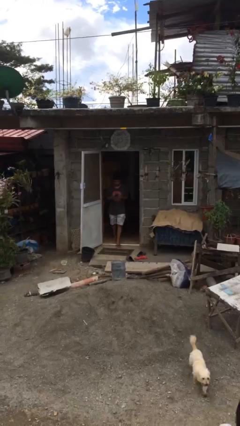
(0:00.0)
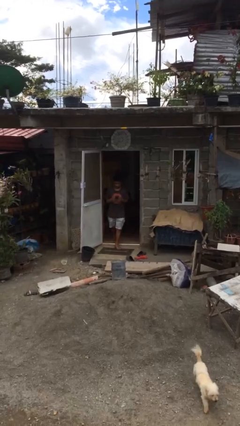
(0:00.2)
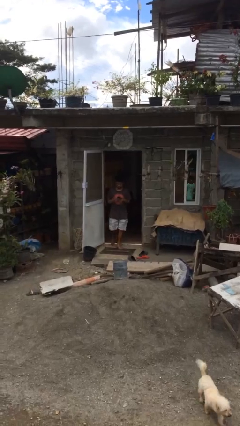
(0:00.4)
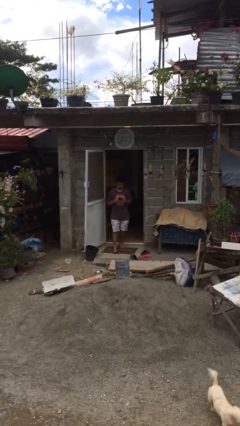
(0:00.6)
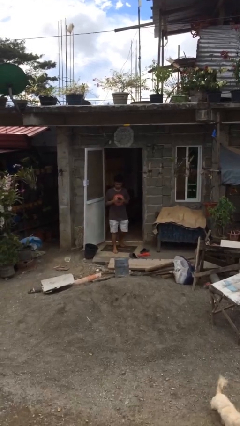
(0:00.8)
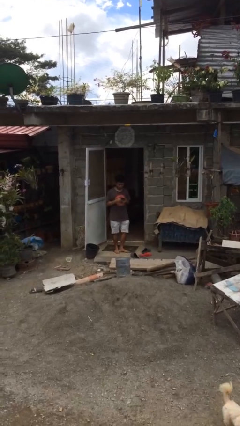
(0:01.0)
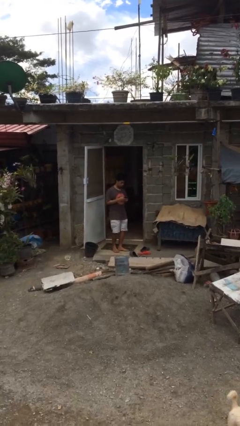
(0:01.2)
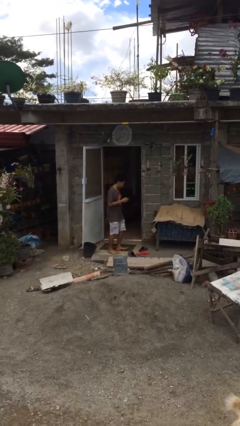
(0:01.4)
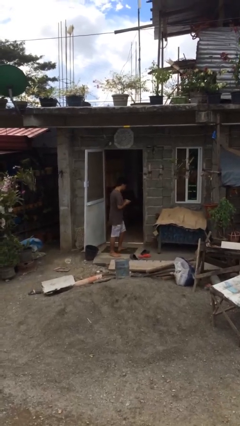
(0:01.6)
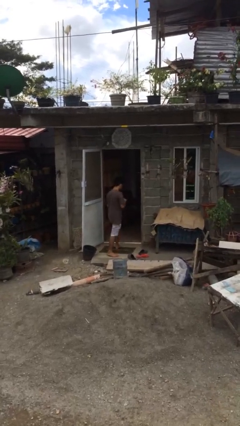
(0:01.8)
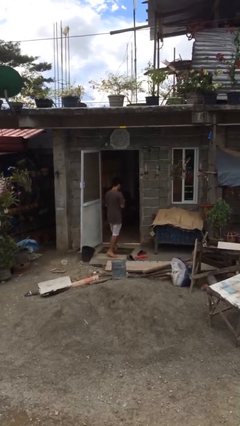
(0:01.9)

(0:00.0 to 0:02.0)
person enters scene through structure

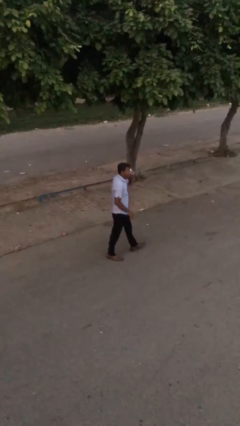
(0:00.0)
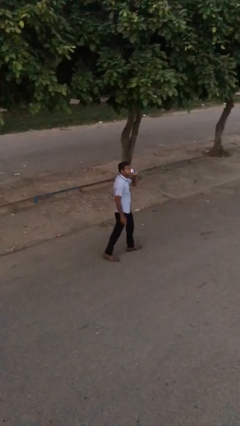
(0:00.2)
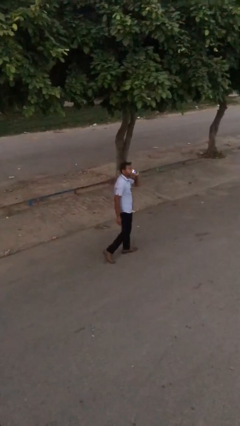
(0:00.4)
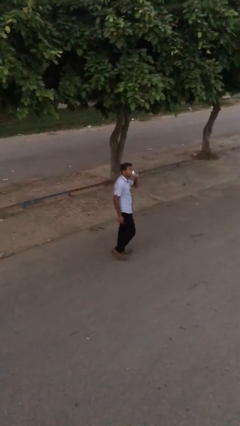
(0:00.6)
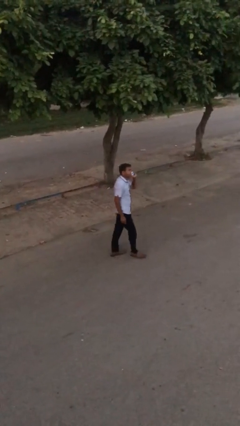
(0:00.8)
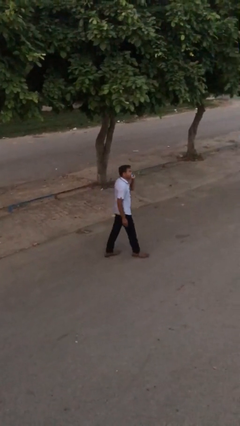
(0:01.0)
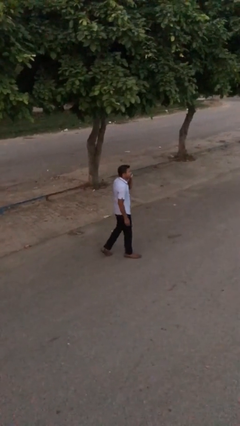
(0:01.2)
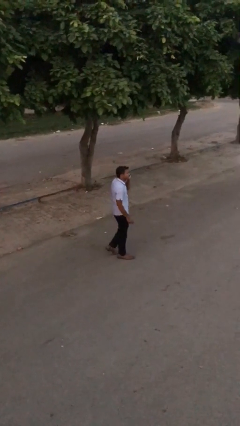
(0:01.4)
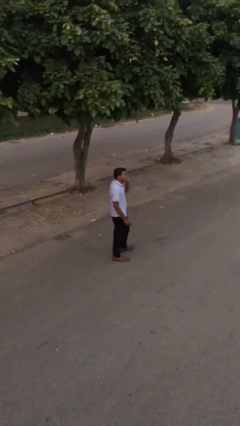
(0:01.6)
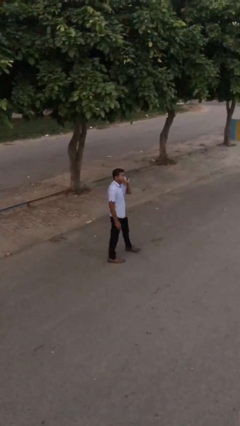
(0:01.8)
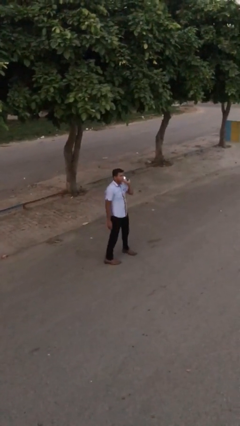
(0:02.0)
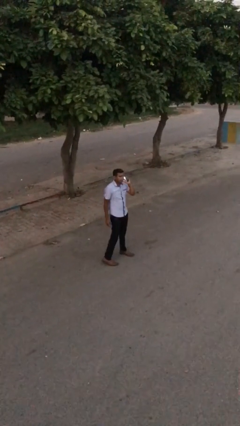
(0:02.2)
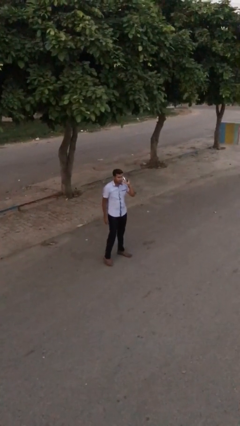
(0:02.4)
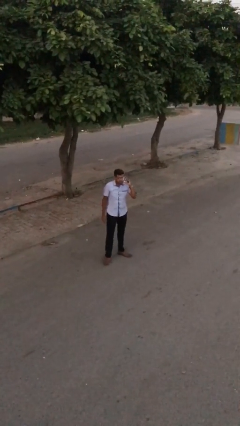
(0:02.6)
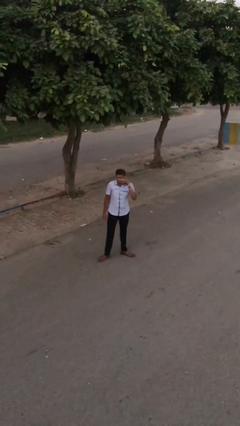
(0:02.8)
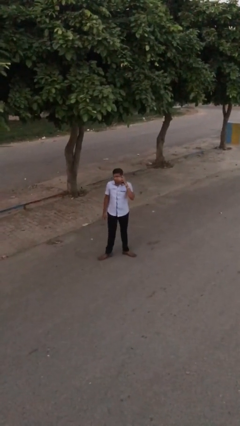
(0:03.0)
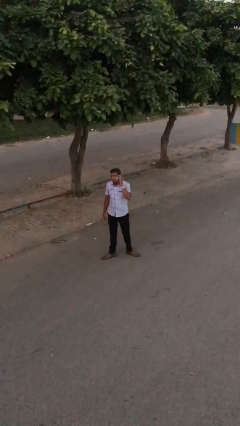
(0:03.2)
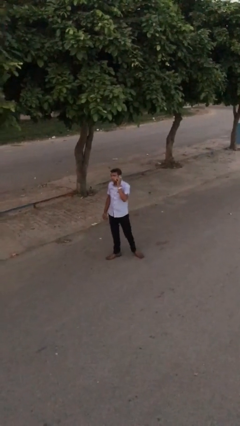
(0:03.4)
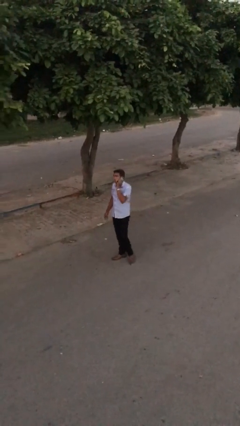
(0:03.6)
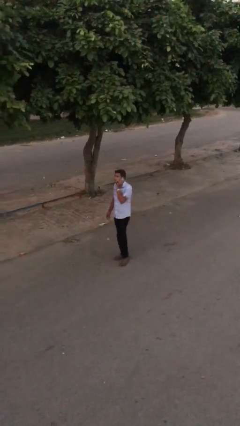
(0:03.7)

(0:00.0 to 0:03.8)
person talks on phone

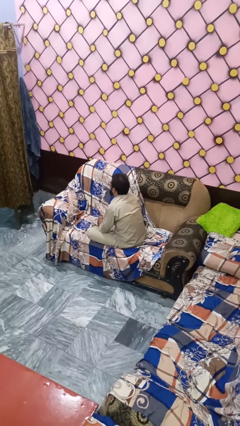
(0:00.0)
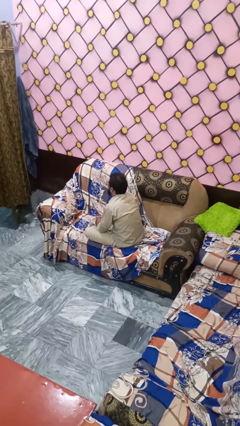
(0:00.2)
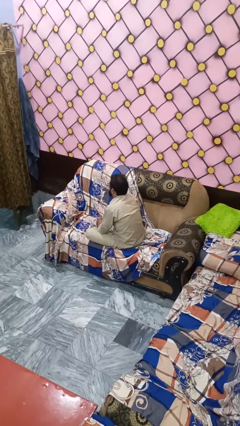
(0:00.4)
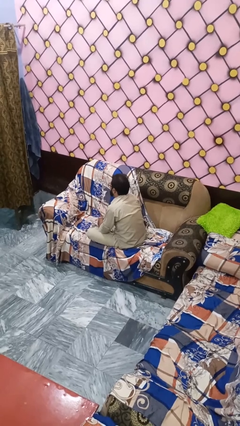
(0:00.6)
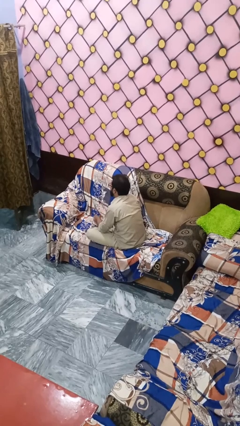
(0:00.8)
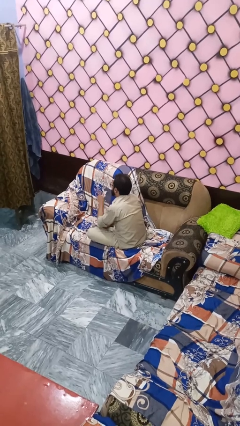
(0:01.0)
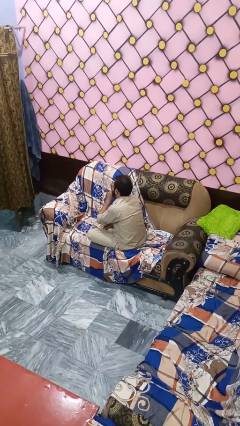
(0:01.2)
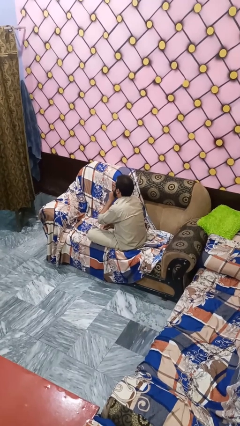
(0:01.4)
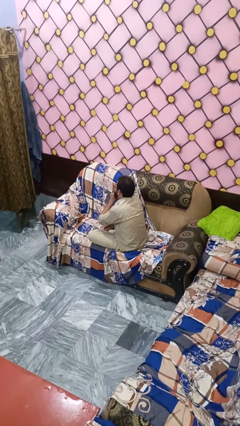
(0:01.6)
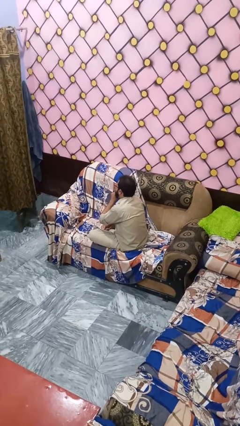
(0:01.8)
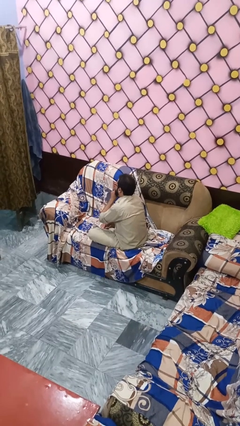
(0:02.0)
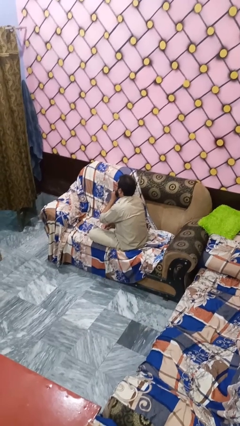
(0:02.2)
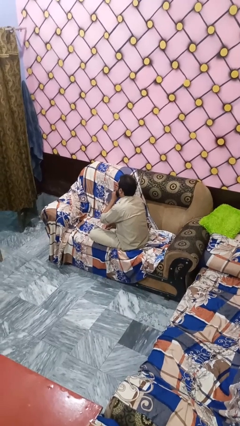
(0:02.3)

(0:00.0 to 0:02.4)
person gestures be quiet

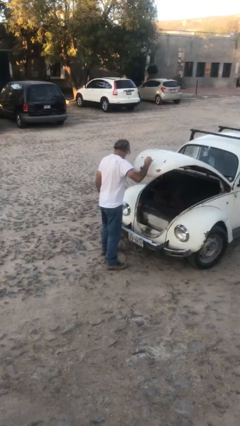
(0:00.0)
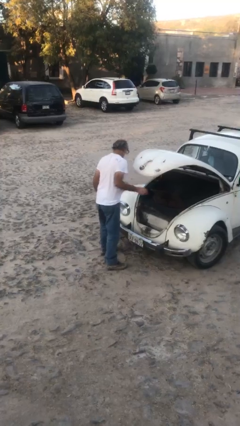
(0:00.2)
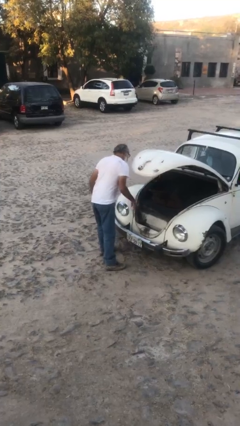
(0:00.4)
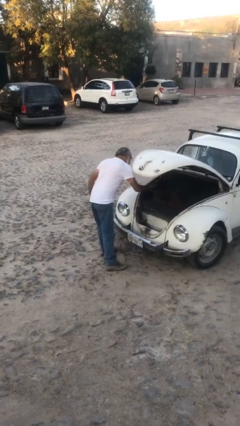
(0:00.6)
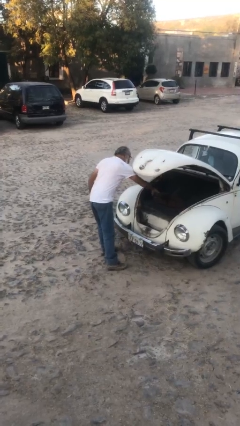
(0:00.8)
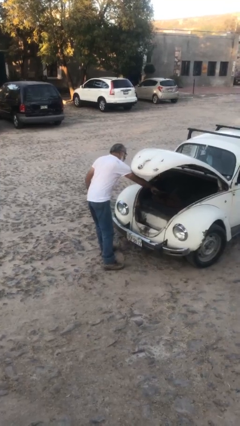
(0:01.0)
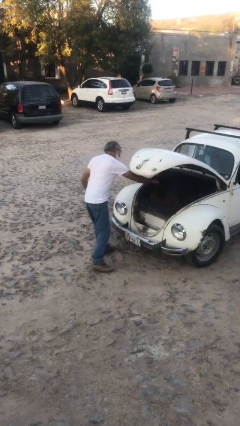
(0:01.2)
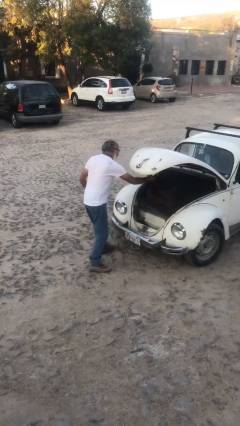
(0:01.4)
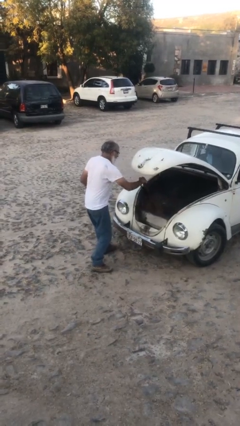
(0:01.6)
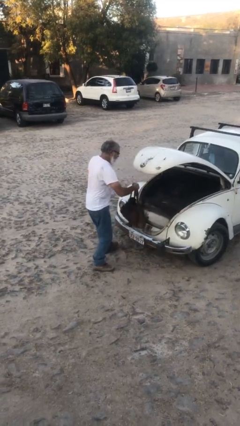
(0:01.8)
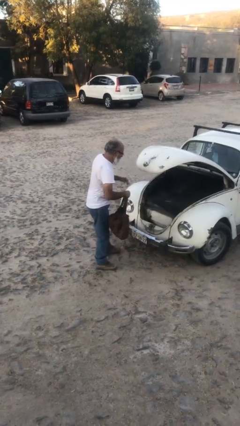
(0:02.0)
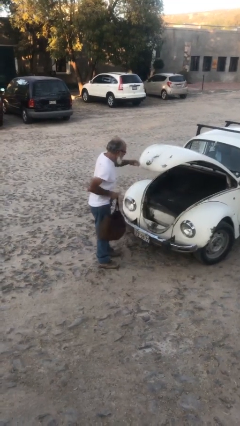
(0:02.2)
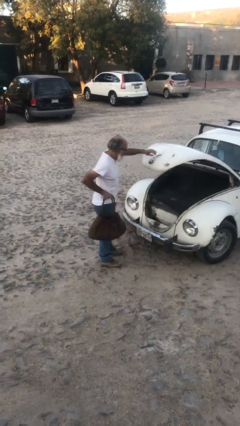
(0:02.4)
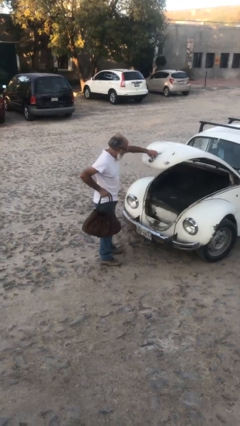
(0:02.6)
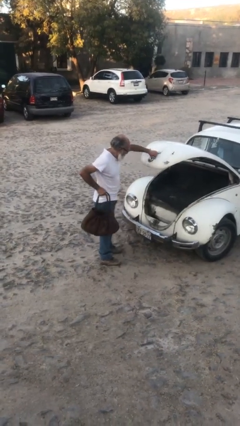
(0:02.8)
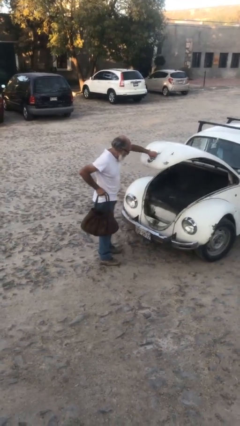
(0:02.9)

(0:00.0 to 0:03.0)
person unloads car

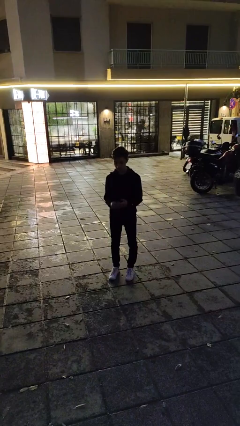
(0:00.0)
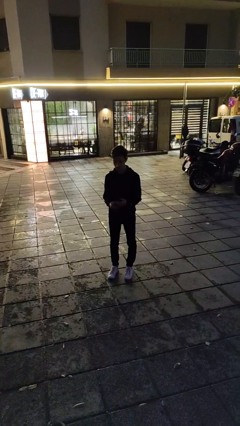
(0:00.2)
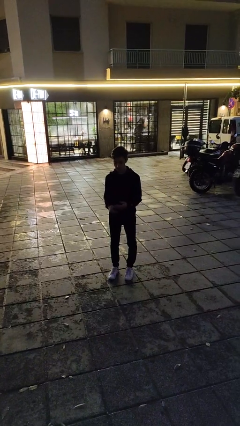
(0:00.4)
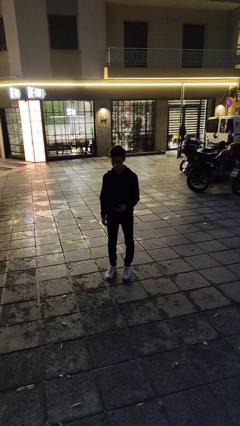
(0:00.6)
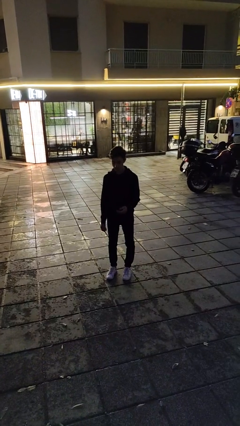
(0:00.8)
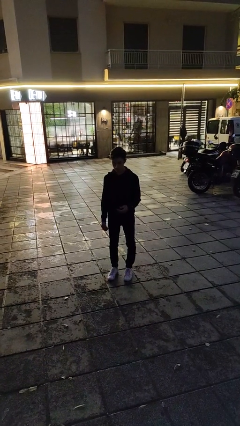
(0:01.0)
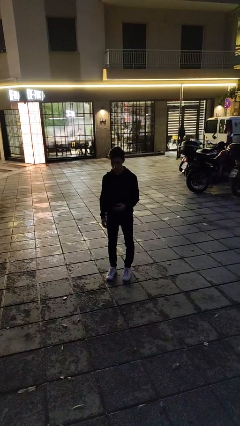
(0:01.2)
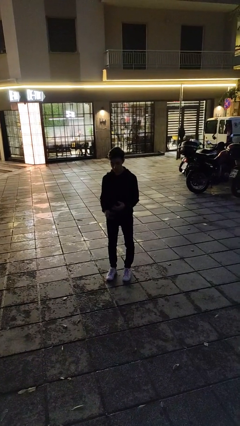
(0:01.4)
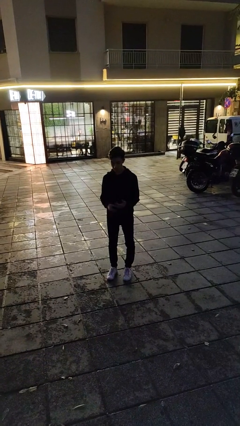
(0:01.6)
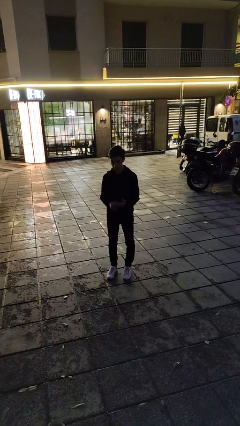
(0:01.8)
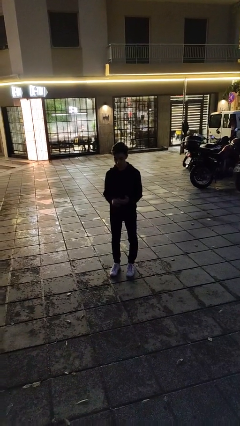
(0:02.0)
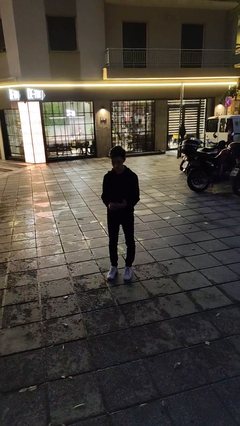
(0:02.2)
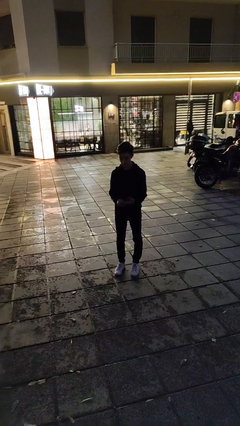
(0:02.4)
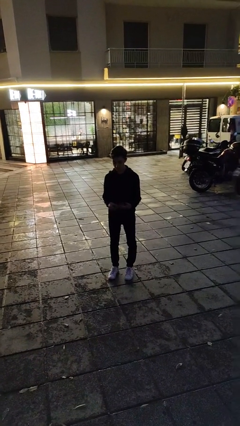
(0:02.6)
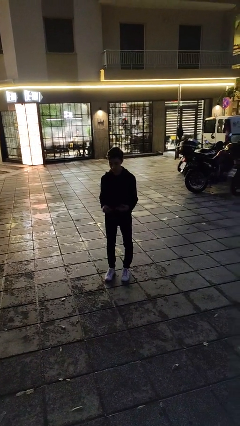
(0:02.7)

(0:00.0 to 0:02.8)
person puts on ring

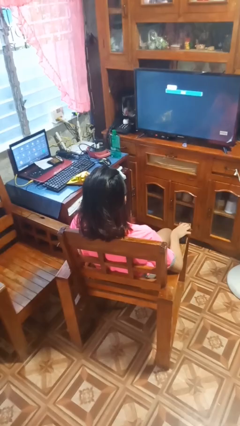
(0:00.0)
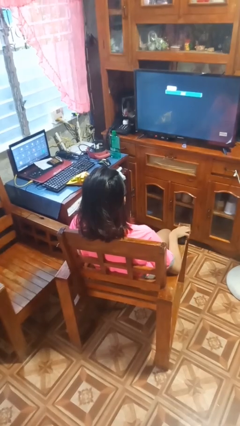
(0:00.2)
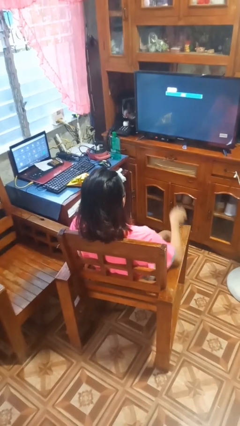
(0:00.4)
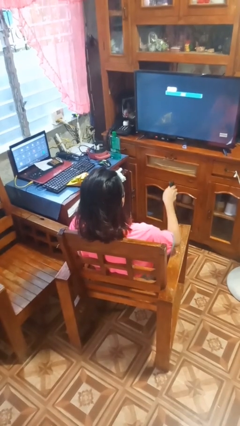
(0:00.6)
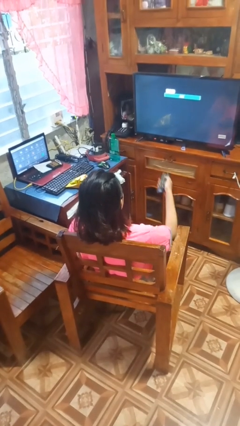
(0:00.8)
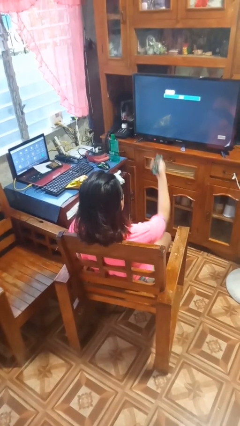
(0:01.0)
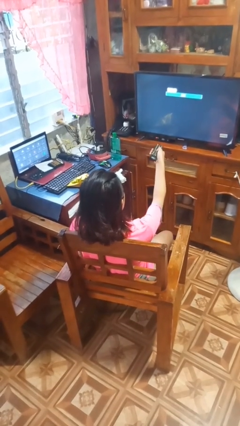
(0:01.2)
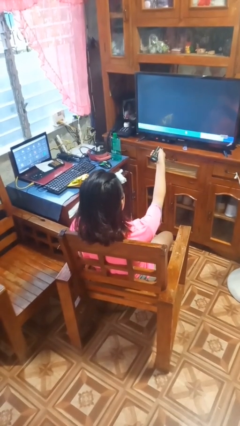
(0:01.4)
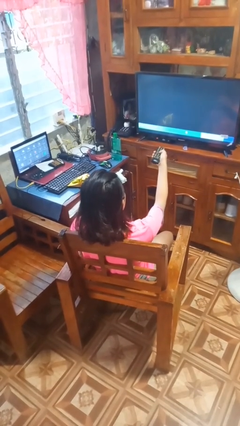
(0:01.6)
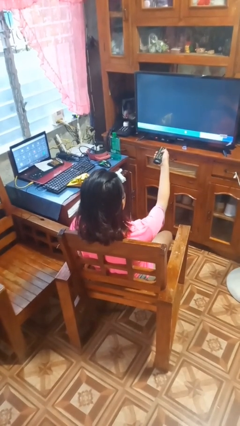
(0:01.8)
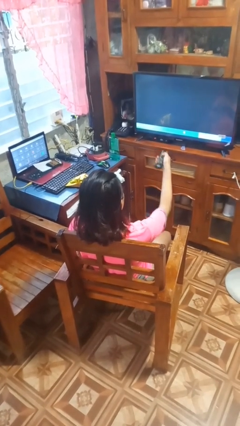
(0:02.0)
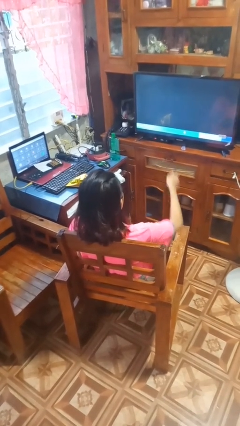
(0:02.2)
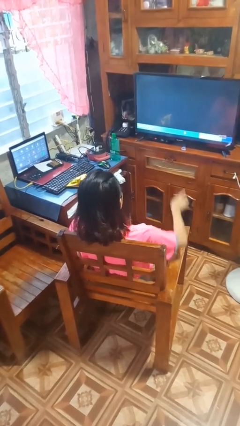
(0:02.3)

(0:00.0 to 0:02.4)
person uses television remote

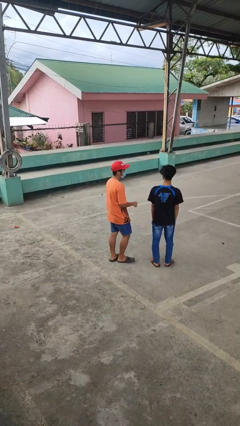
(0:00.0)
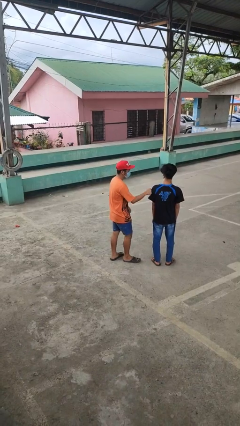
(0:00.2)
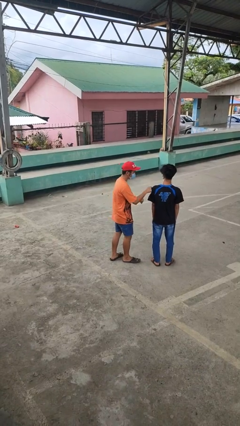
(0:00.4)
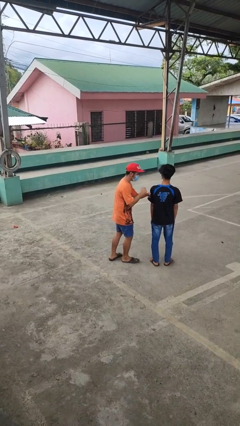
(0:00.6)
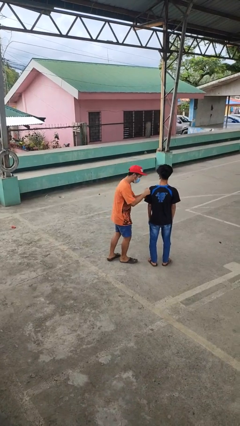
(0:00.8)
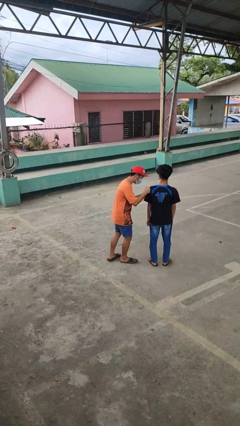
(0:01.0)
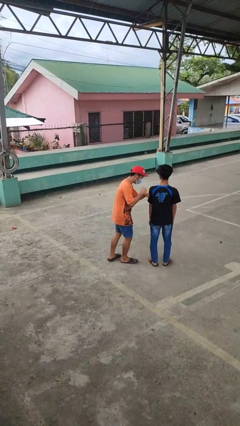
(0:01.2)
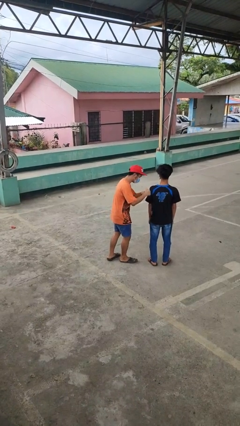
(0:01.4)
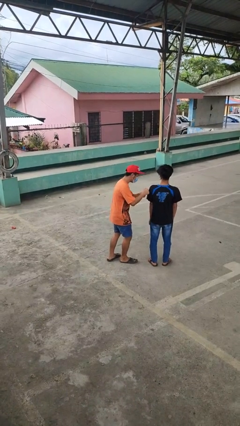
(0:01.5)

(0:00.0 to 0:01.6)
person pounds shoulders of person
